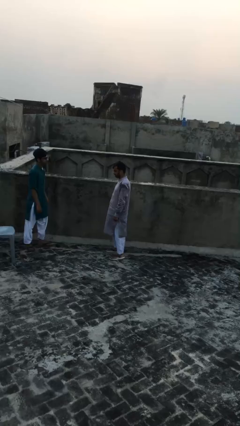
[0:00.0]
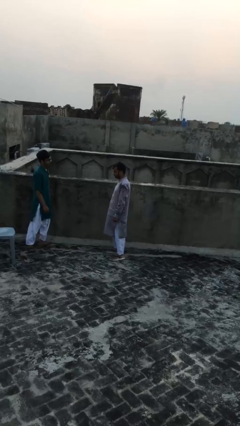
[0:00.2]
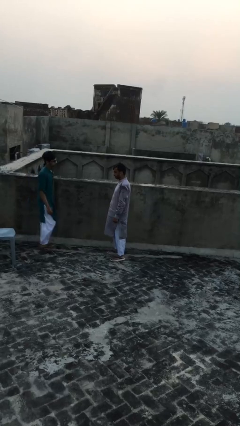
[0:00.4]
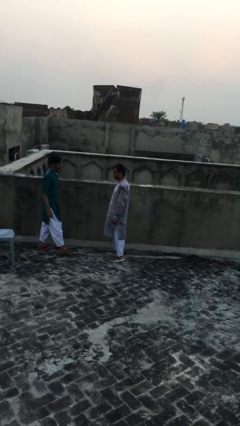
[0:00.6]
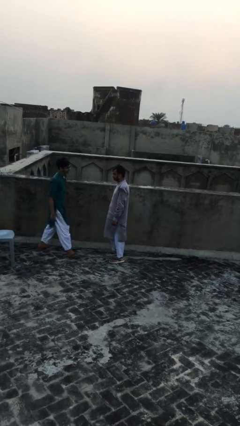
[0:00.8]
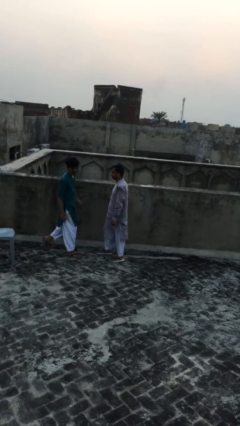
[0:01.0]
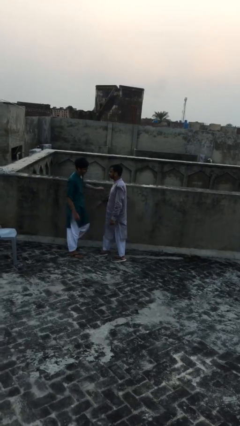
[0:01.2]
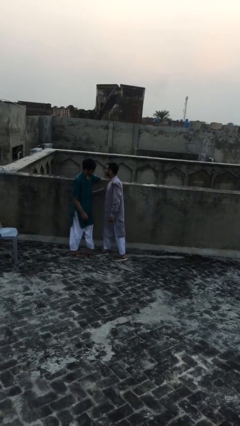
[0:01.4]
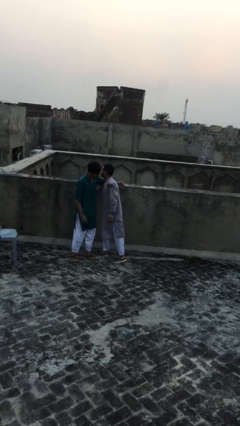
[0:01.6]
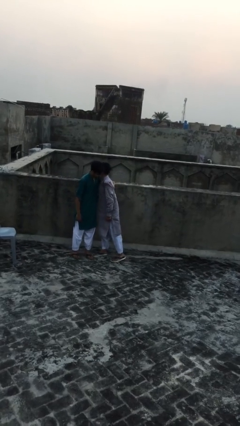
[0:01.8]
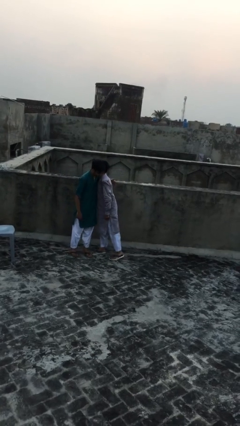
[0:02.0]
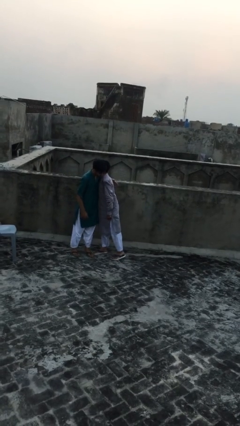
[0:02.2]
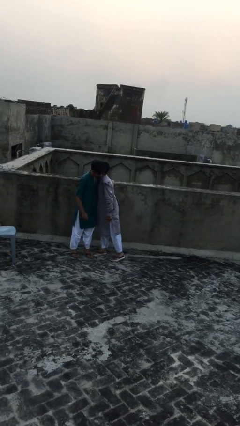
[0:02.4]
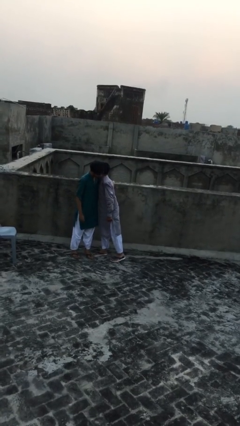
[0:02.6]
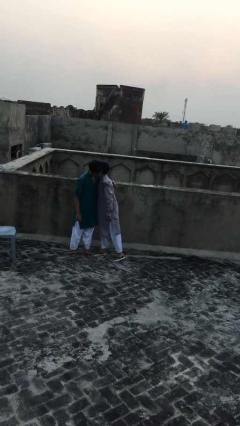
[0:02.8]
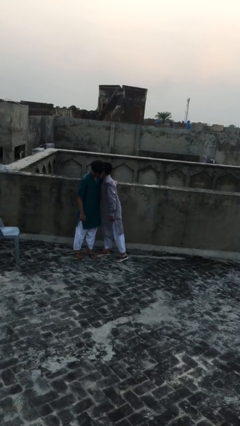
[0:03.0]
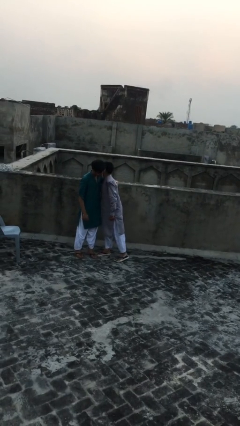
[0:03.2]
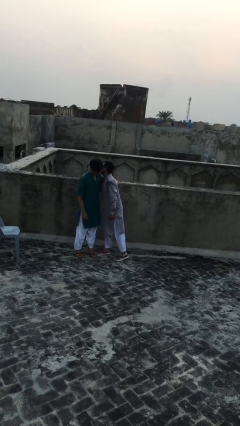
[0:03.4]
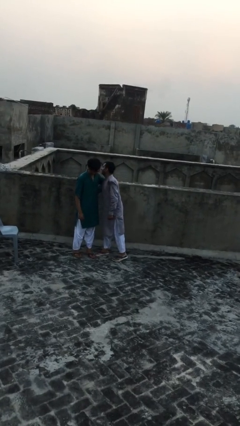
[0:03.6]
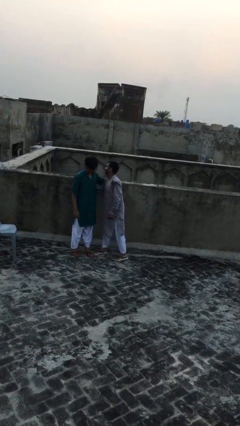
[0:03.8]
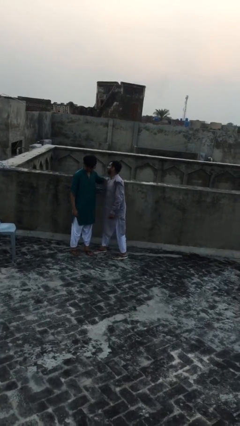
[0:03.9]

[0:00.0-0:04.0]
person embraces person

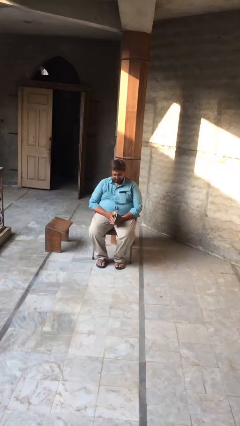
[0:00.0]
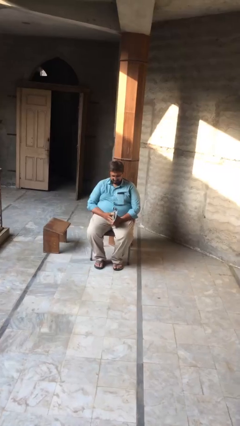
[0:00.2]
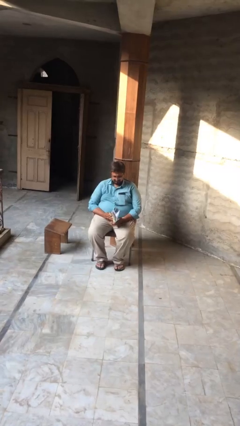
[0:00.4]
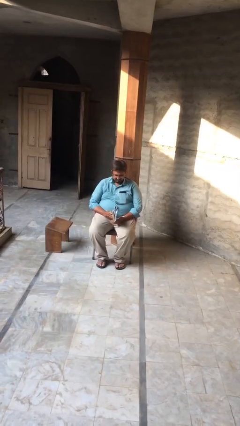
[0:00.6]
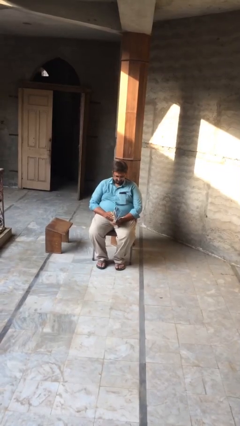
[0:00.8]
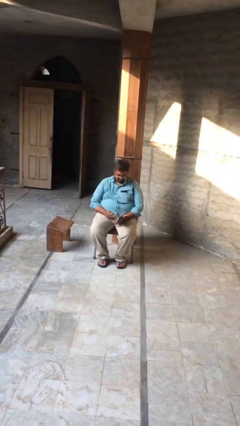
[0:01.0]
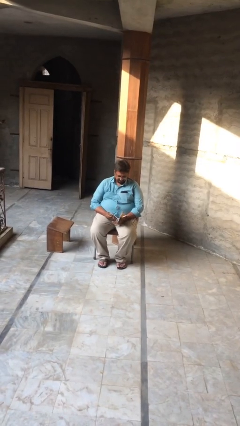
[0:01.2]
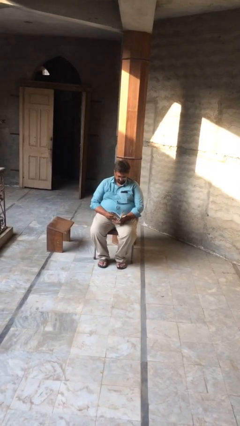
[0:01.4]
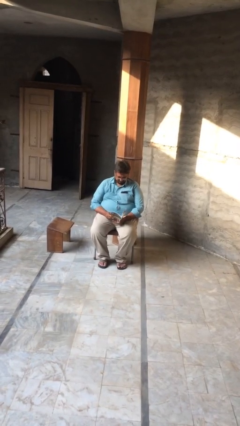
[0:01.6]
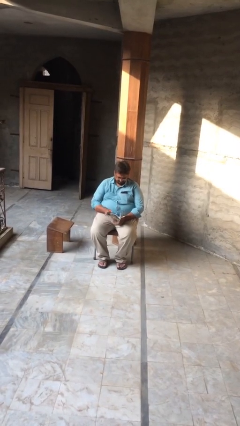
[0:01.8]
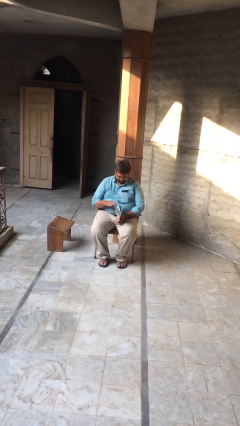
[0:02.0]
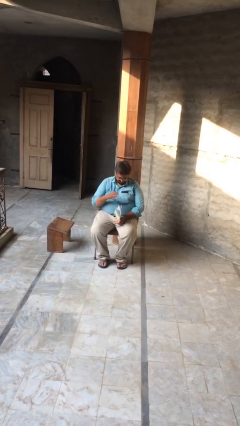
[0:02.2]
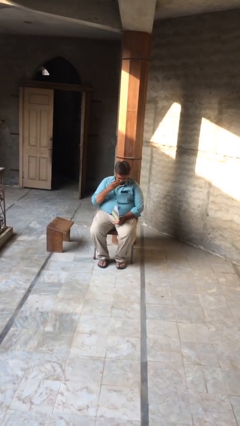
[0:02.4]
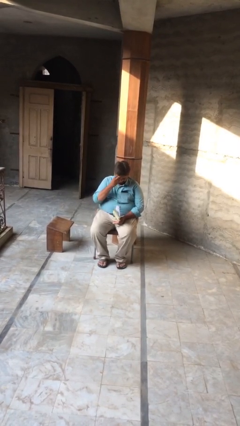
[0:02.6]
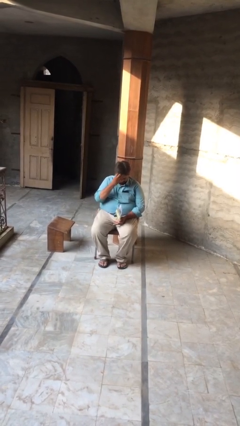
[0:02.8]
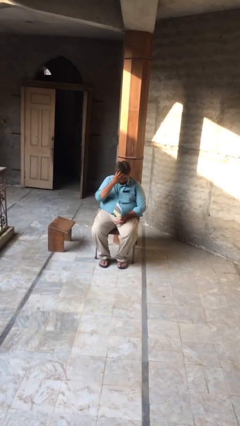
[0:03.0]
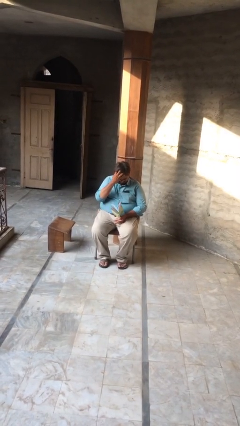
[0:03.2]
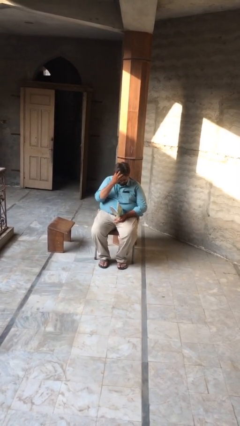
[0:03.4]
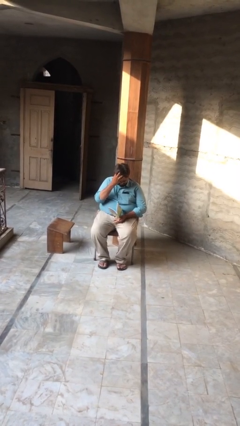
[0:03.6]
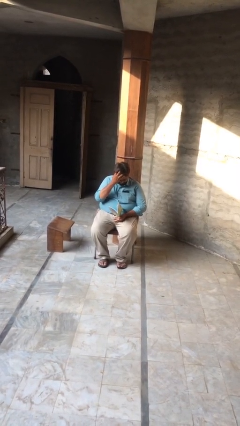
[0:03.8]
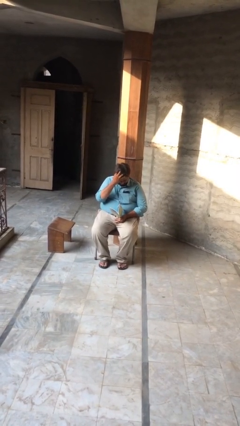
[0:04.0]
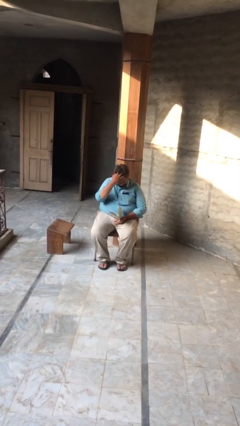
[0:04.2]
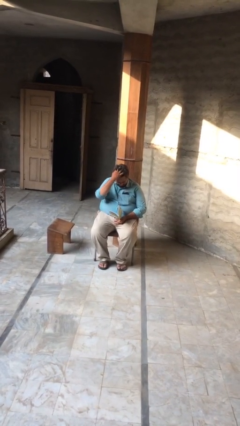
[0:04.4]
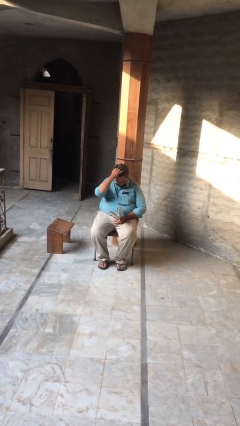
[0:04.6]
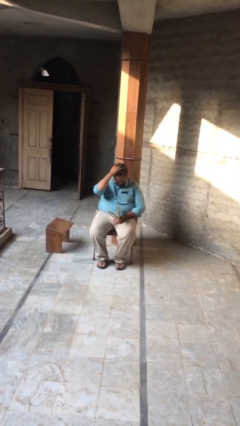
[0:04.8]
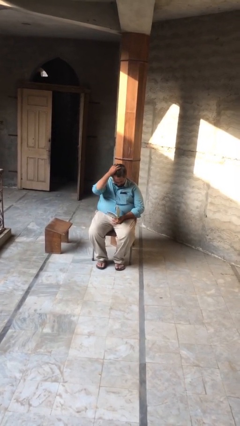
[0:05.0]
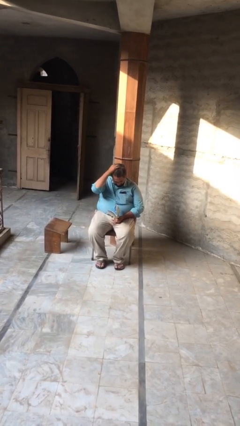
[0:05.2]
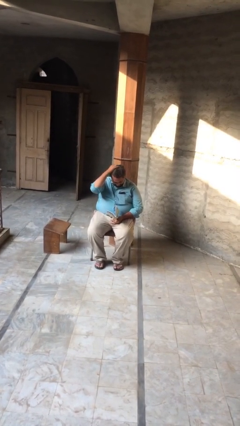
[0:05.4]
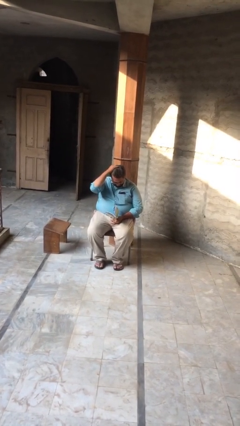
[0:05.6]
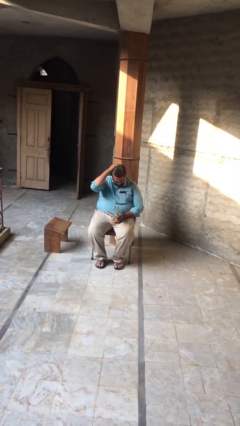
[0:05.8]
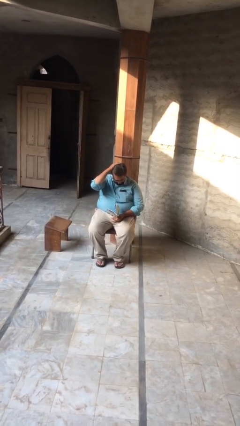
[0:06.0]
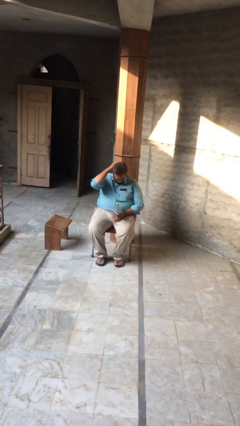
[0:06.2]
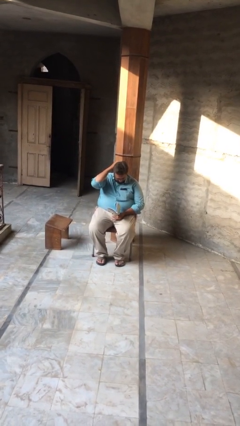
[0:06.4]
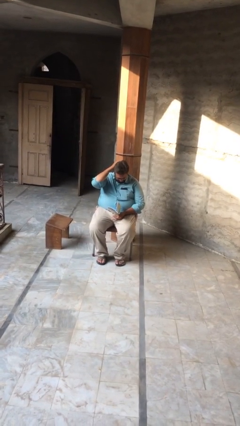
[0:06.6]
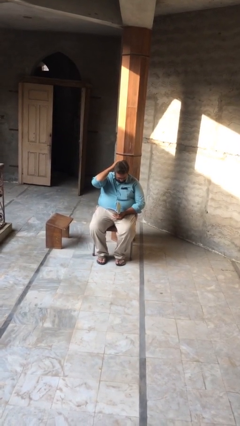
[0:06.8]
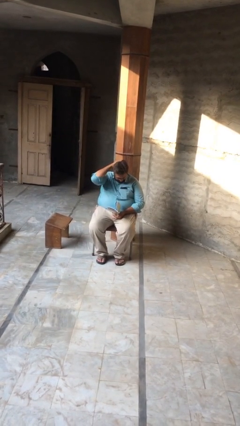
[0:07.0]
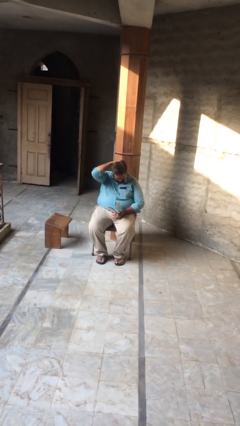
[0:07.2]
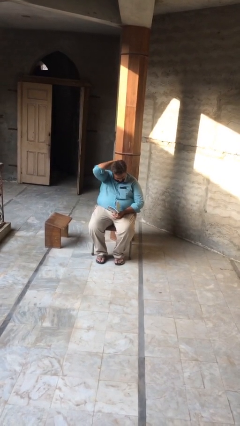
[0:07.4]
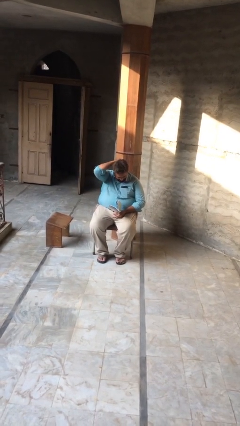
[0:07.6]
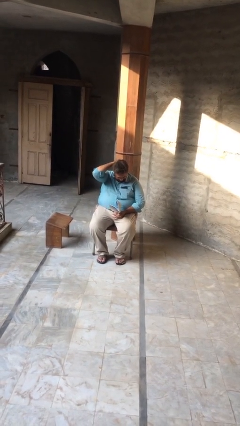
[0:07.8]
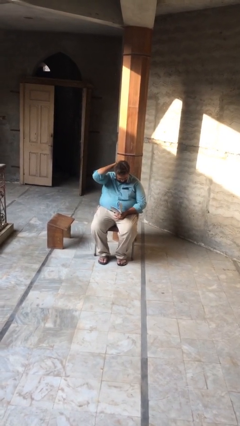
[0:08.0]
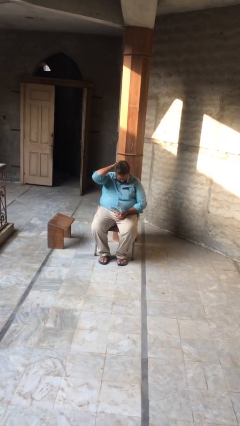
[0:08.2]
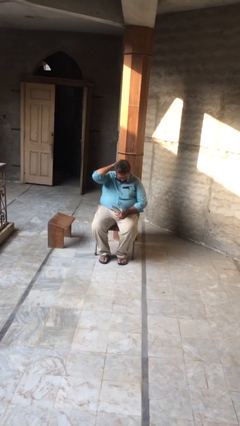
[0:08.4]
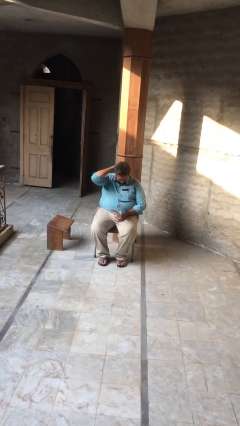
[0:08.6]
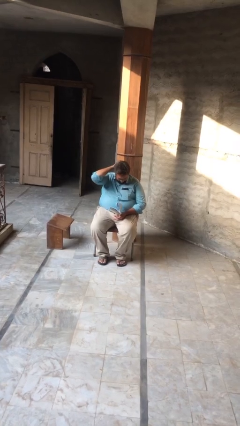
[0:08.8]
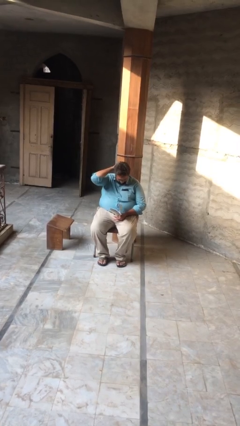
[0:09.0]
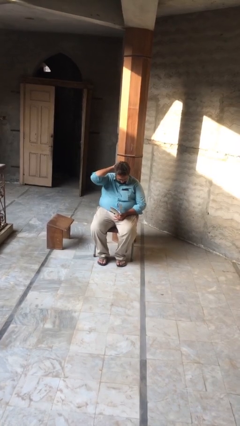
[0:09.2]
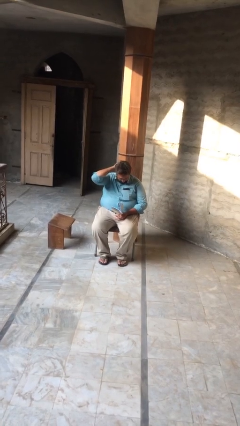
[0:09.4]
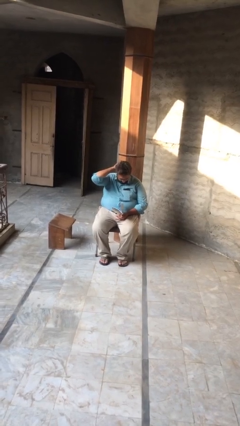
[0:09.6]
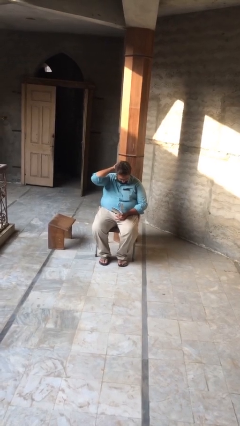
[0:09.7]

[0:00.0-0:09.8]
person reads document

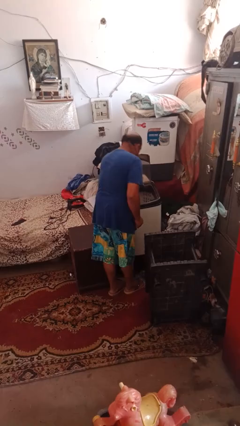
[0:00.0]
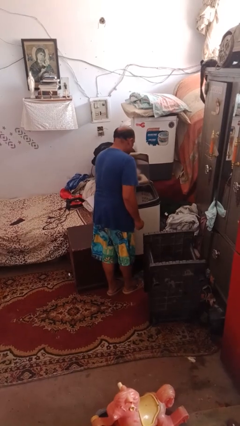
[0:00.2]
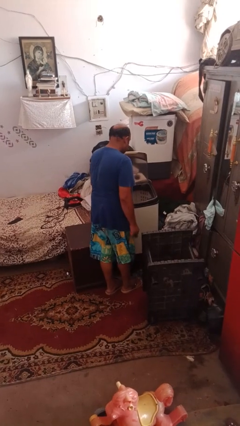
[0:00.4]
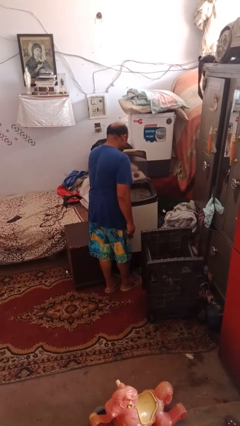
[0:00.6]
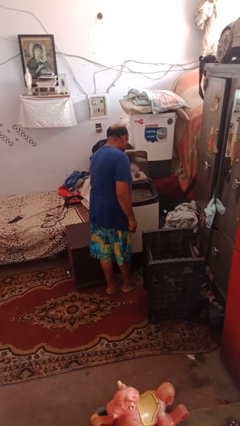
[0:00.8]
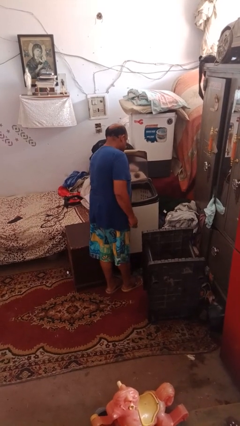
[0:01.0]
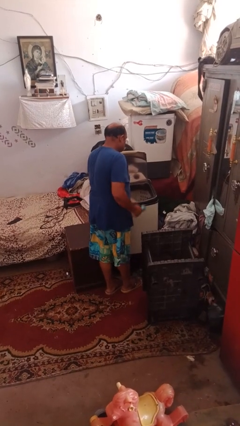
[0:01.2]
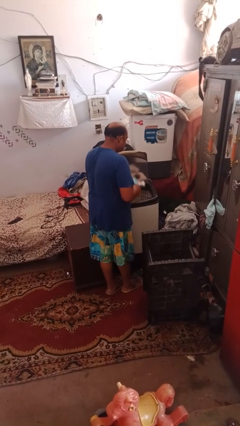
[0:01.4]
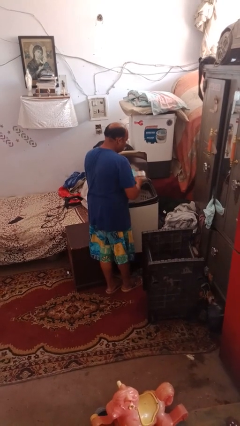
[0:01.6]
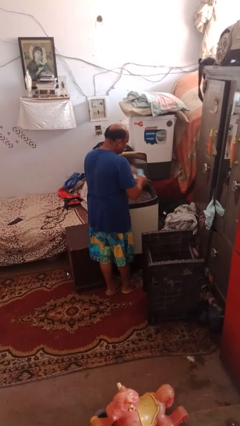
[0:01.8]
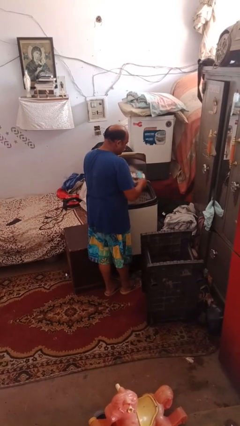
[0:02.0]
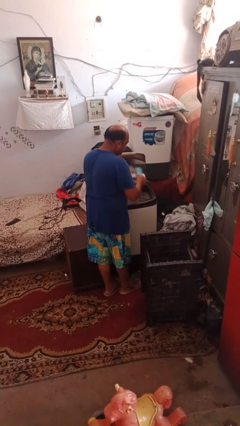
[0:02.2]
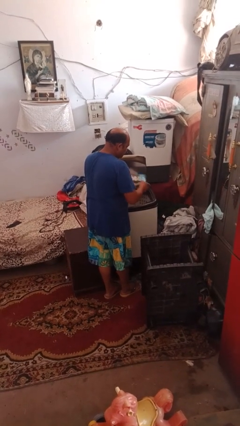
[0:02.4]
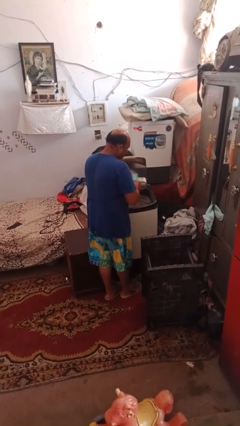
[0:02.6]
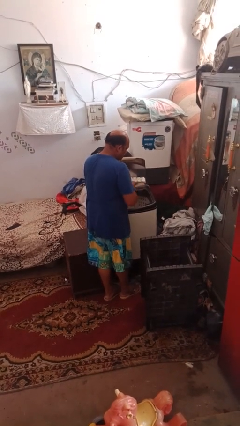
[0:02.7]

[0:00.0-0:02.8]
person cleans dryer lint trap

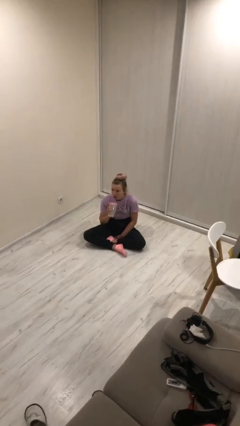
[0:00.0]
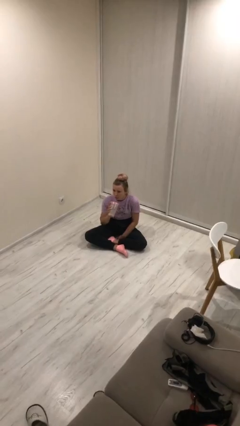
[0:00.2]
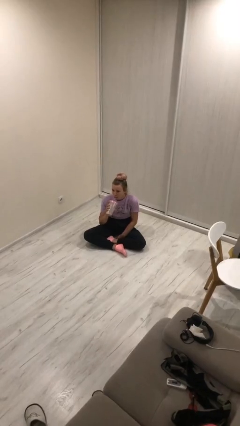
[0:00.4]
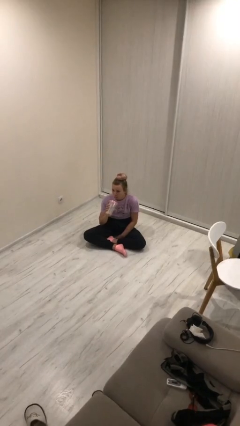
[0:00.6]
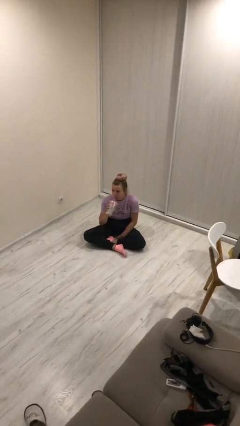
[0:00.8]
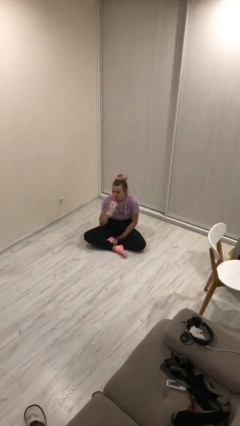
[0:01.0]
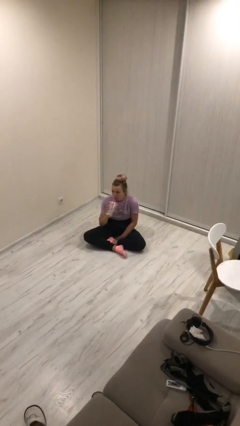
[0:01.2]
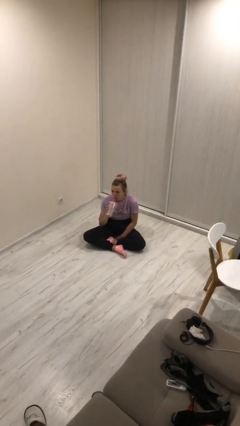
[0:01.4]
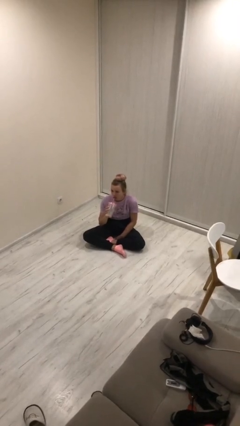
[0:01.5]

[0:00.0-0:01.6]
person drinks from straw
